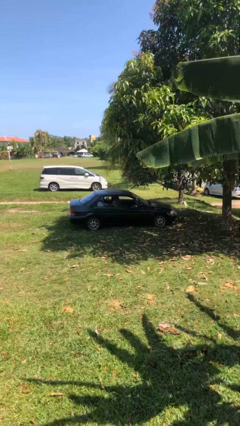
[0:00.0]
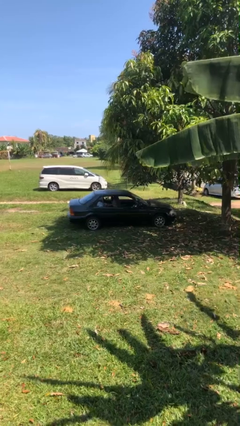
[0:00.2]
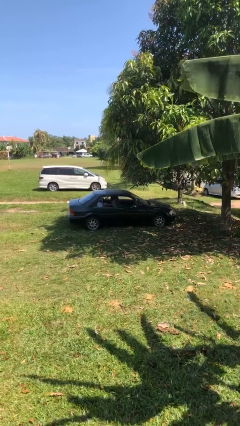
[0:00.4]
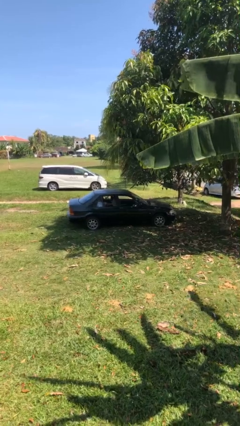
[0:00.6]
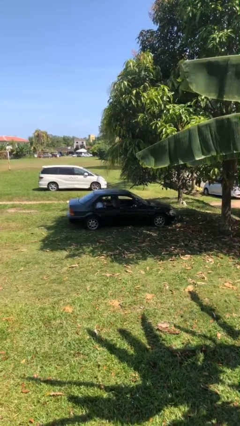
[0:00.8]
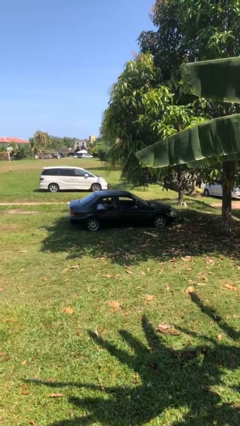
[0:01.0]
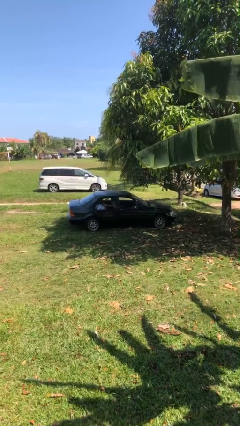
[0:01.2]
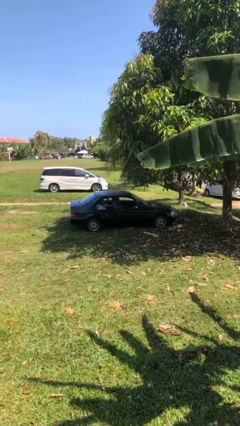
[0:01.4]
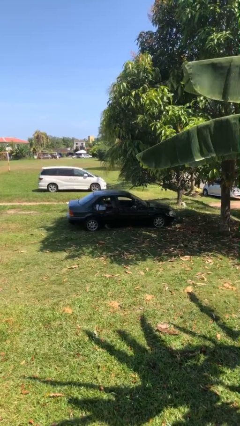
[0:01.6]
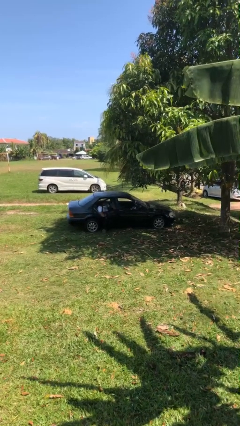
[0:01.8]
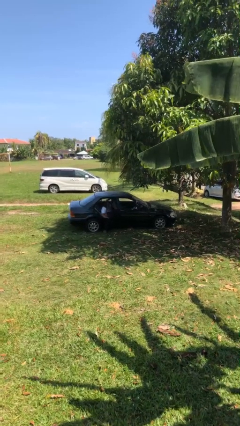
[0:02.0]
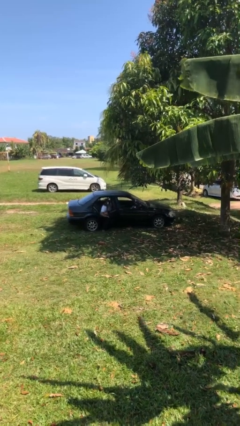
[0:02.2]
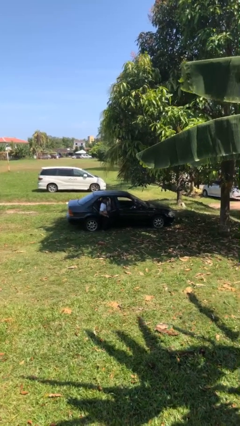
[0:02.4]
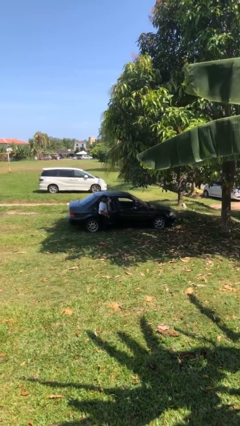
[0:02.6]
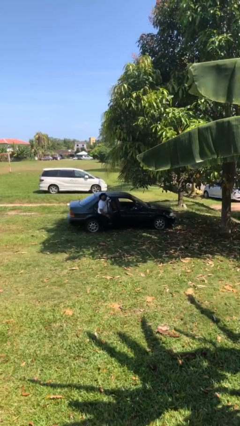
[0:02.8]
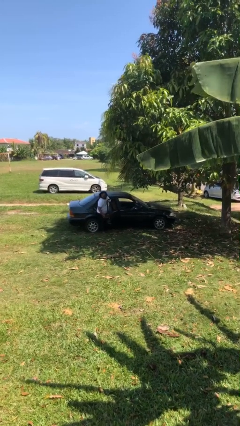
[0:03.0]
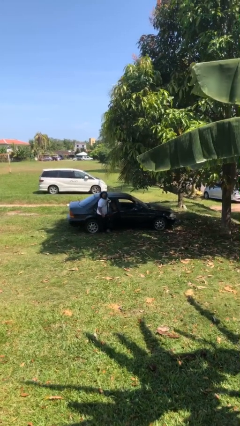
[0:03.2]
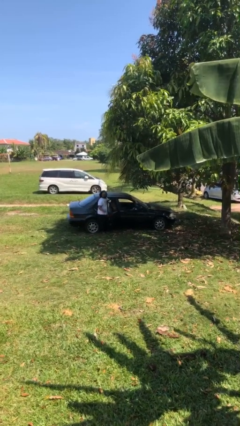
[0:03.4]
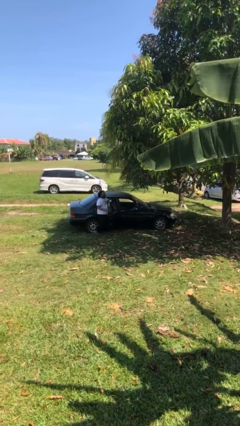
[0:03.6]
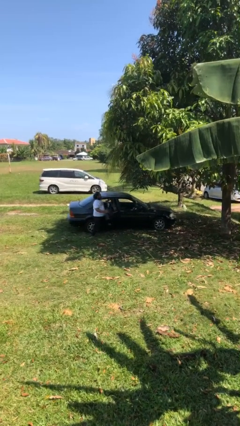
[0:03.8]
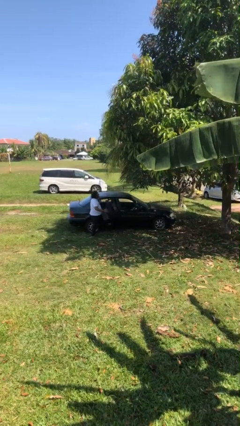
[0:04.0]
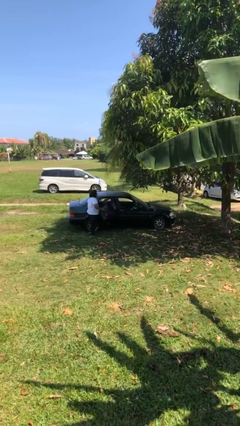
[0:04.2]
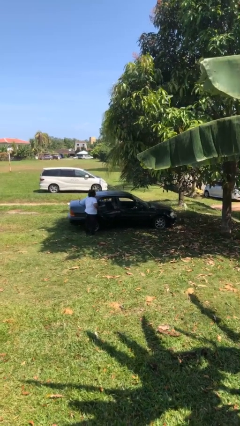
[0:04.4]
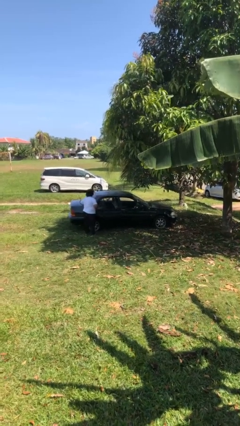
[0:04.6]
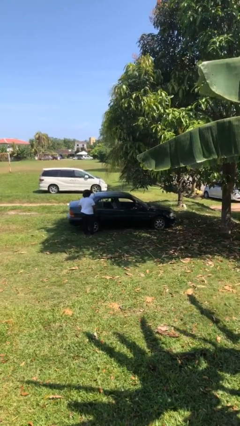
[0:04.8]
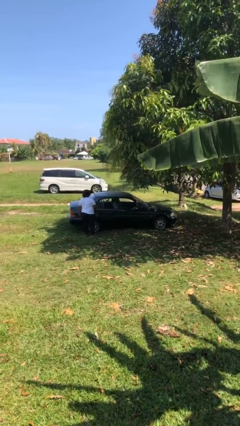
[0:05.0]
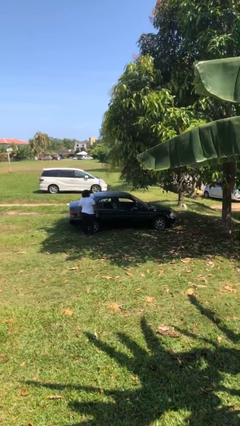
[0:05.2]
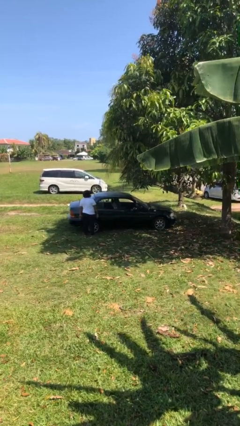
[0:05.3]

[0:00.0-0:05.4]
car drops off person

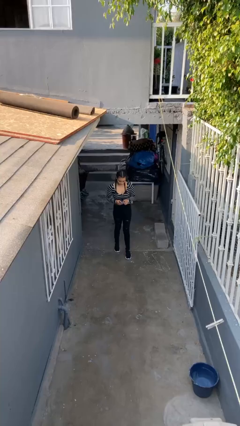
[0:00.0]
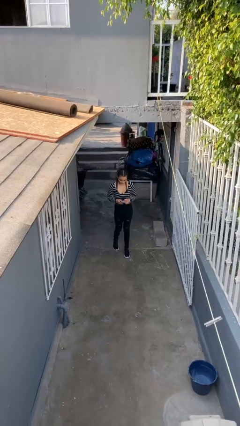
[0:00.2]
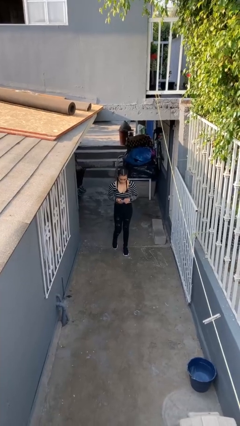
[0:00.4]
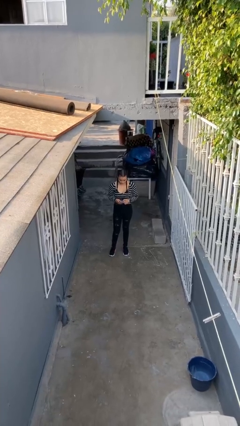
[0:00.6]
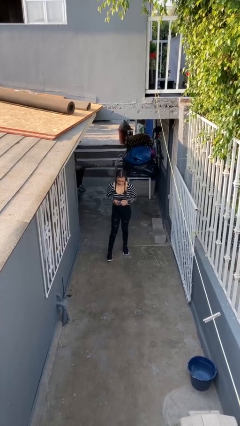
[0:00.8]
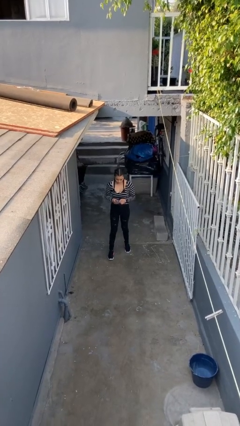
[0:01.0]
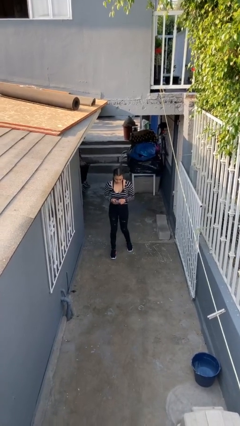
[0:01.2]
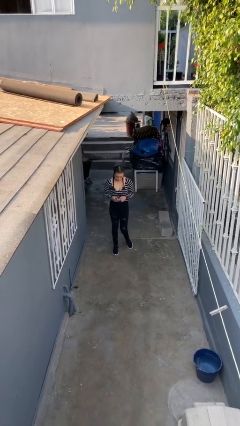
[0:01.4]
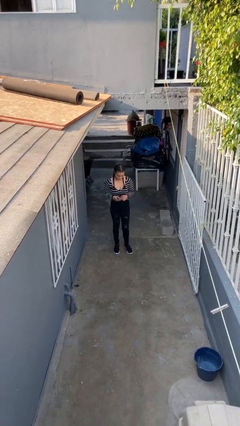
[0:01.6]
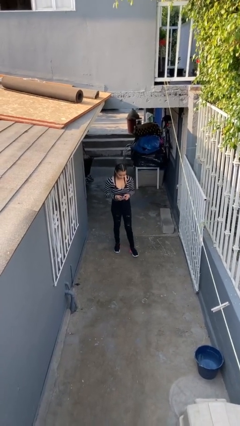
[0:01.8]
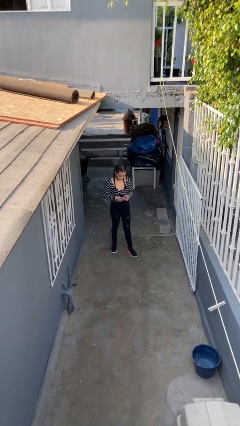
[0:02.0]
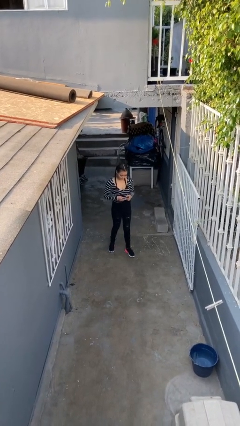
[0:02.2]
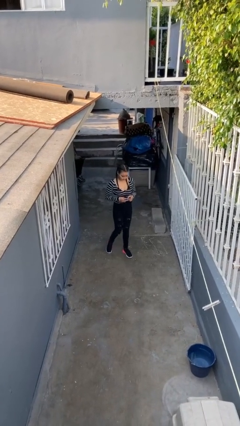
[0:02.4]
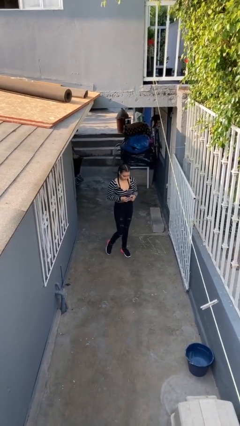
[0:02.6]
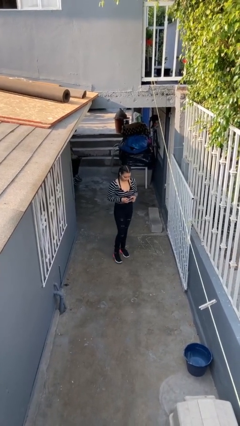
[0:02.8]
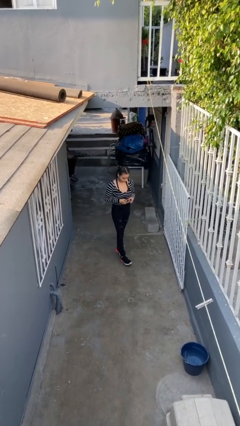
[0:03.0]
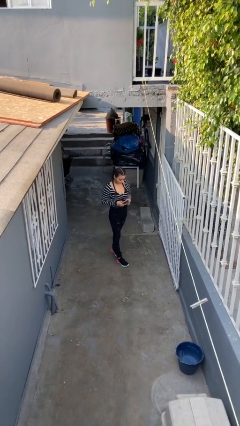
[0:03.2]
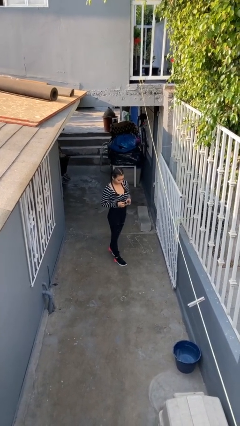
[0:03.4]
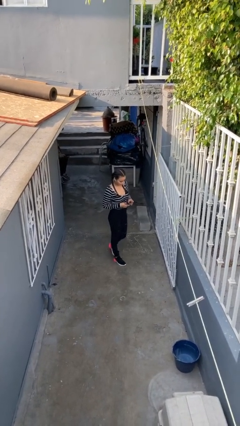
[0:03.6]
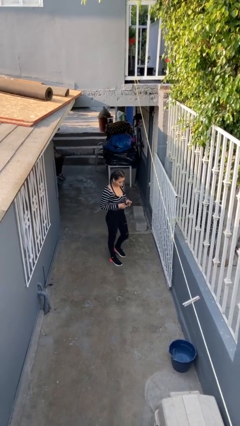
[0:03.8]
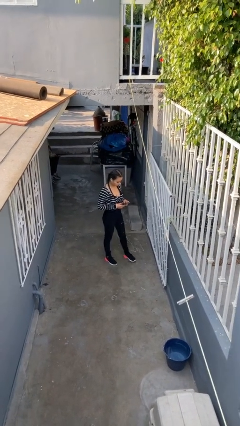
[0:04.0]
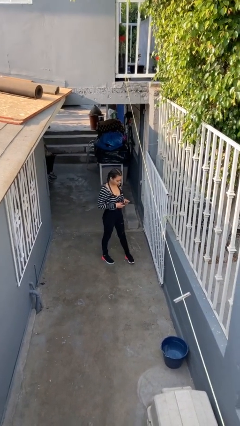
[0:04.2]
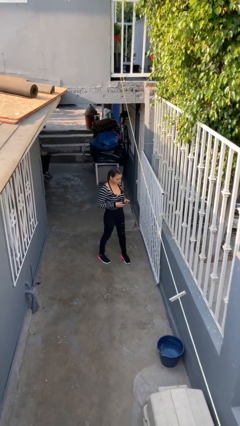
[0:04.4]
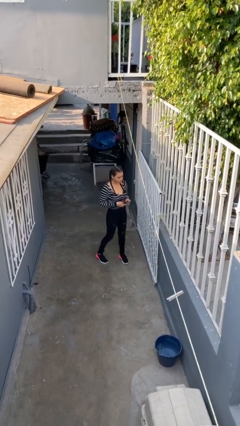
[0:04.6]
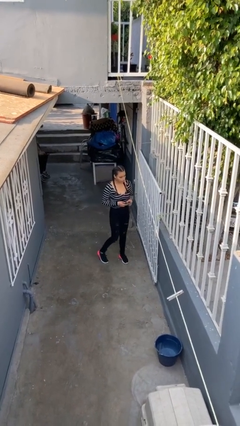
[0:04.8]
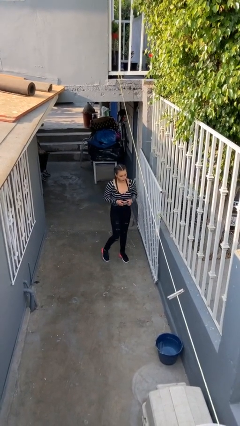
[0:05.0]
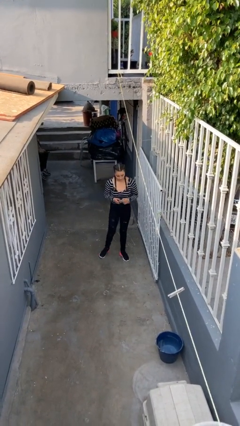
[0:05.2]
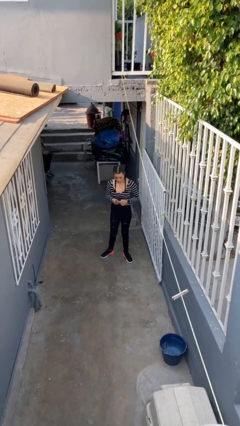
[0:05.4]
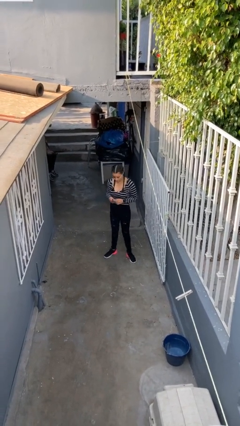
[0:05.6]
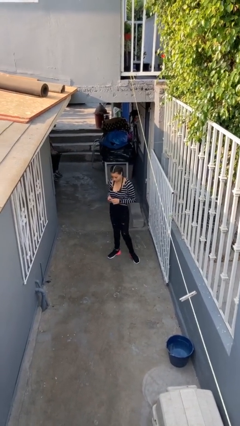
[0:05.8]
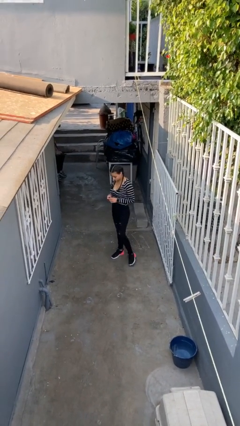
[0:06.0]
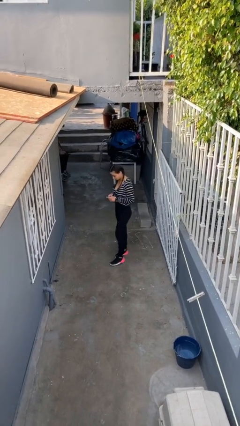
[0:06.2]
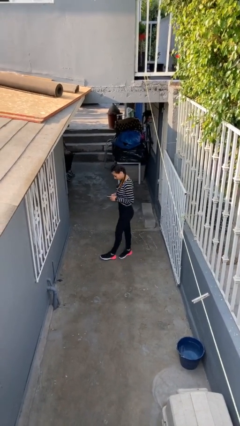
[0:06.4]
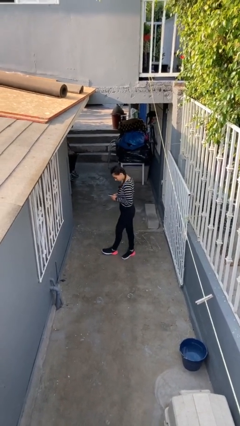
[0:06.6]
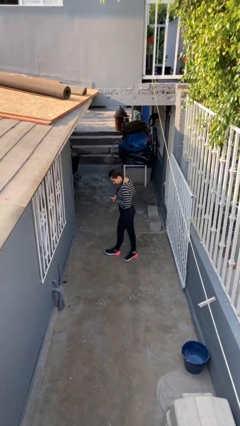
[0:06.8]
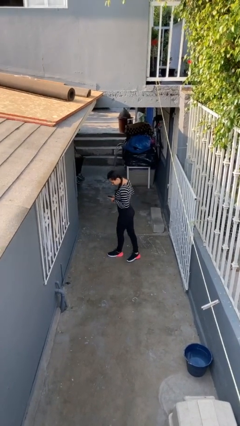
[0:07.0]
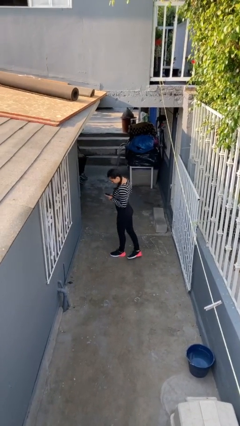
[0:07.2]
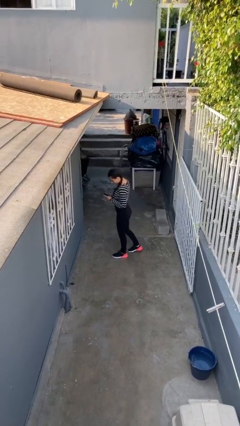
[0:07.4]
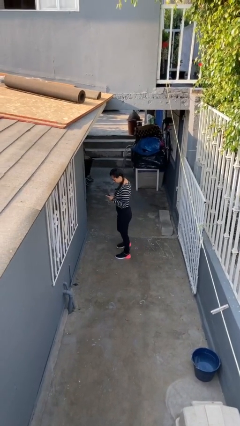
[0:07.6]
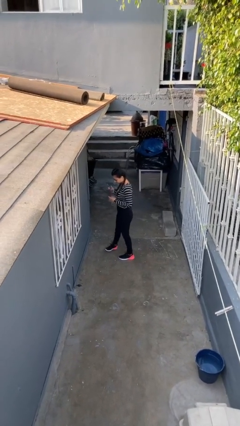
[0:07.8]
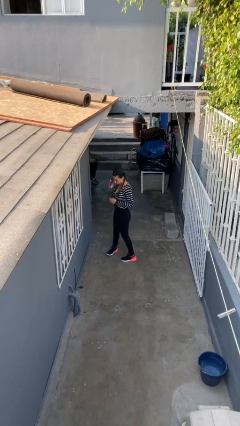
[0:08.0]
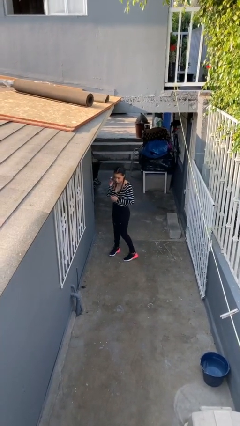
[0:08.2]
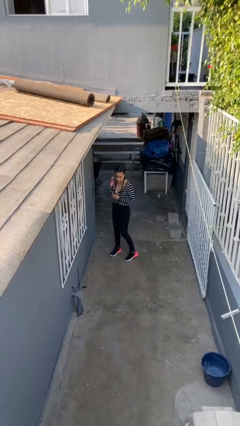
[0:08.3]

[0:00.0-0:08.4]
person texts on phone

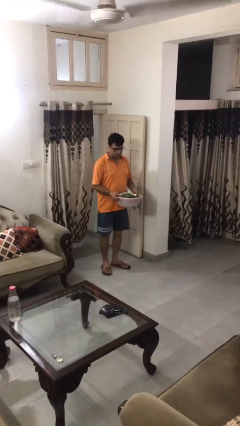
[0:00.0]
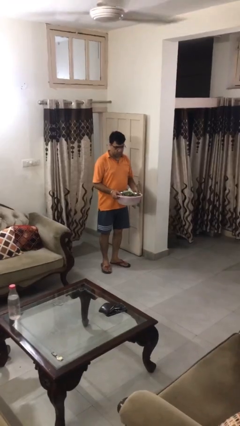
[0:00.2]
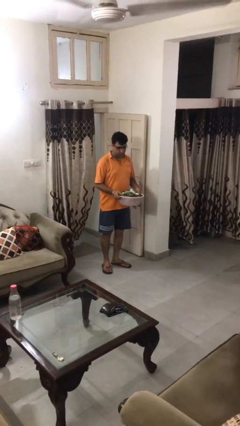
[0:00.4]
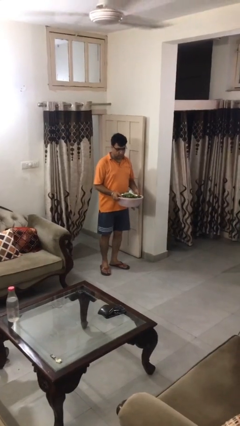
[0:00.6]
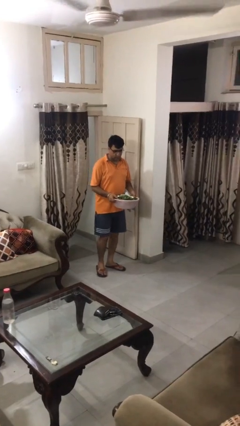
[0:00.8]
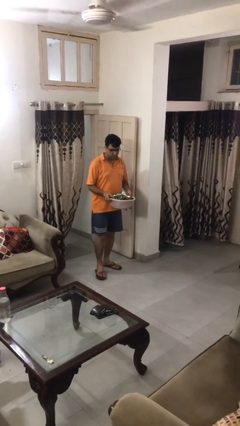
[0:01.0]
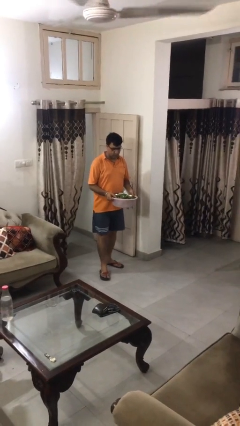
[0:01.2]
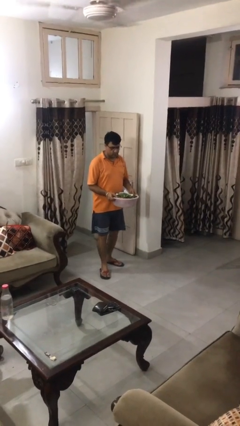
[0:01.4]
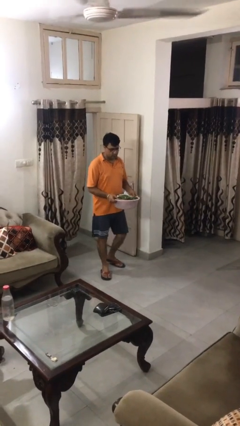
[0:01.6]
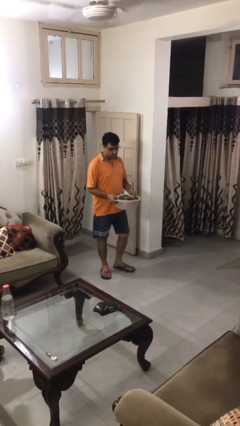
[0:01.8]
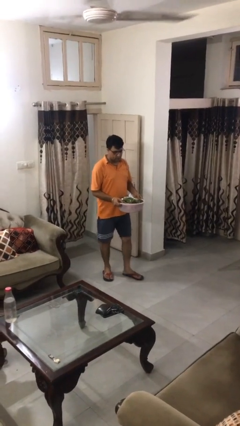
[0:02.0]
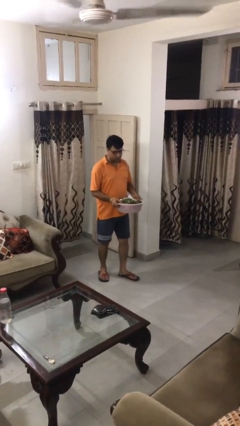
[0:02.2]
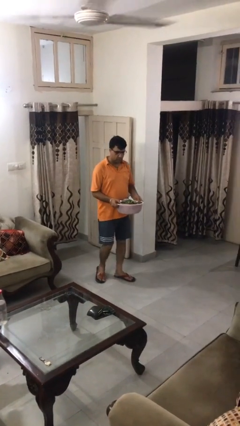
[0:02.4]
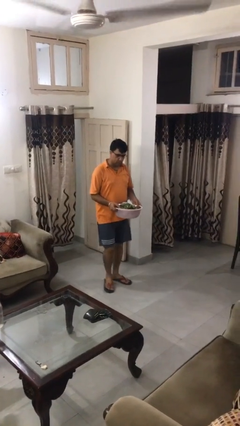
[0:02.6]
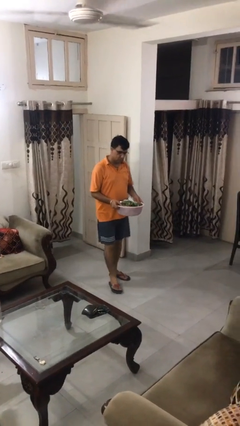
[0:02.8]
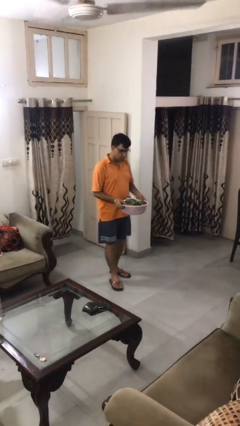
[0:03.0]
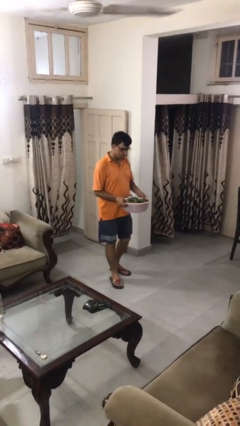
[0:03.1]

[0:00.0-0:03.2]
person carries groceries

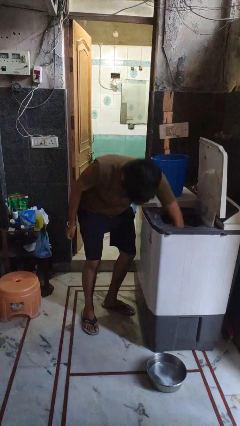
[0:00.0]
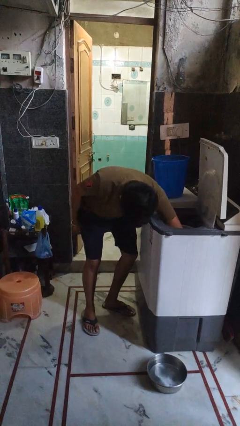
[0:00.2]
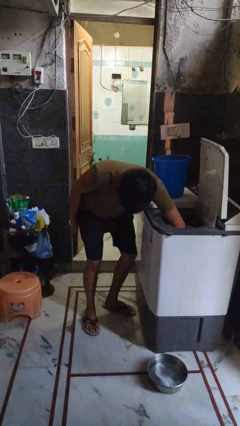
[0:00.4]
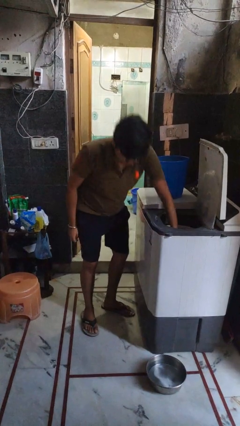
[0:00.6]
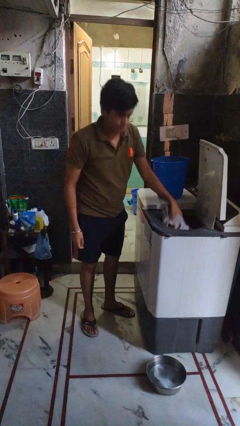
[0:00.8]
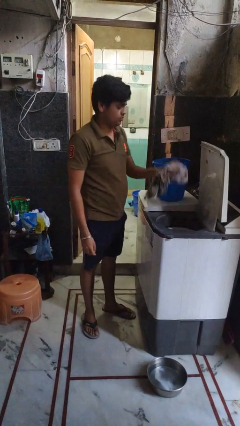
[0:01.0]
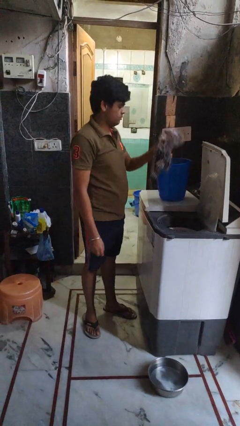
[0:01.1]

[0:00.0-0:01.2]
person unloads dryer
